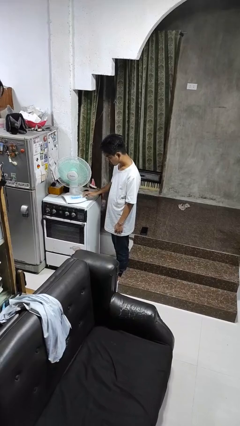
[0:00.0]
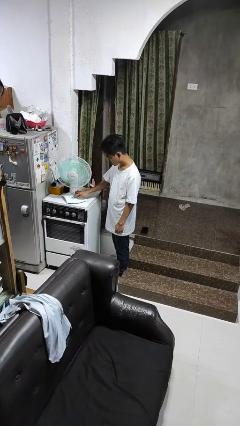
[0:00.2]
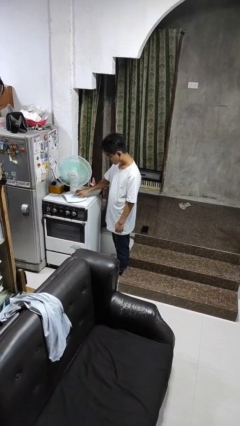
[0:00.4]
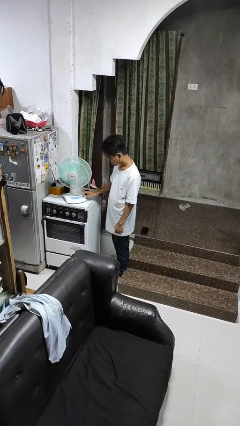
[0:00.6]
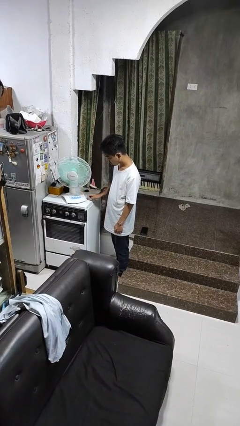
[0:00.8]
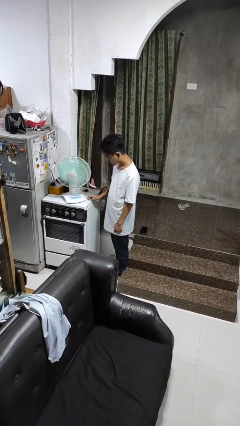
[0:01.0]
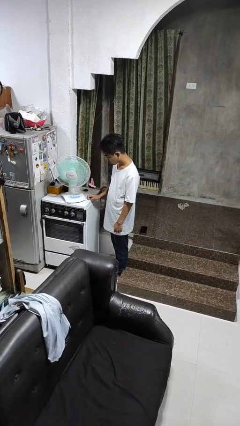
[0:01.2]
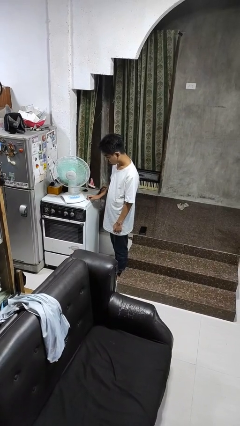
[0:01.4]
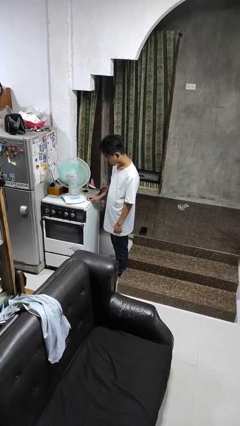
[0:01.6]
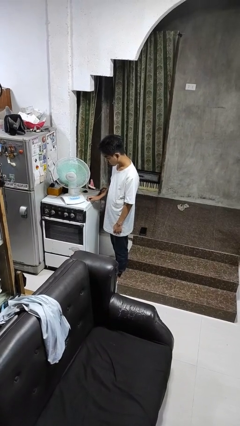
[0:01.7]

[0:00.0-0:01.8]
person turns off fan

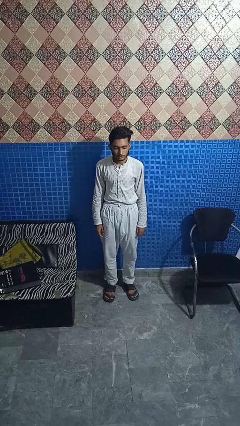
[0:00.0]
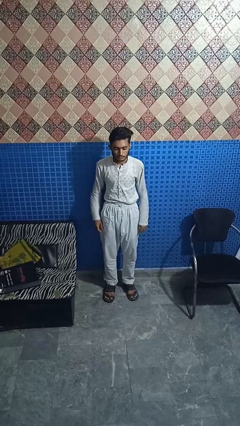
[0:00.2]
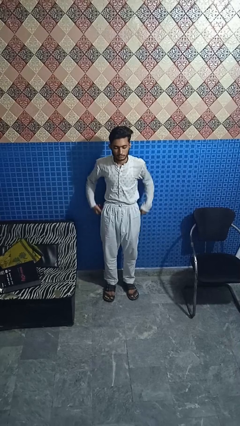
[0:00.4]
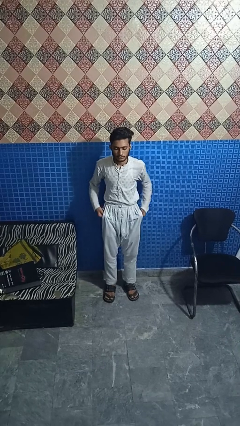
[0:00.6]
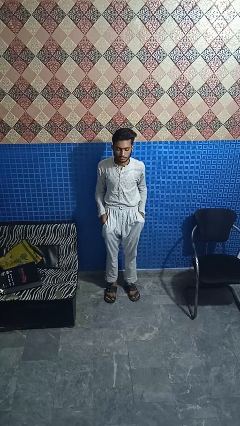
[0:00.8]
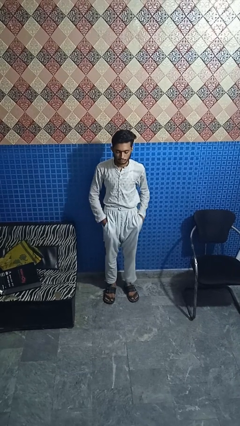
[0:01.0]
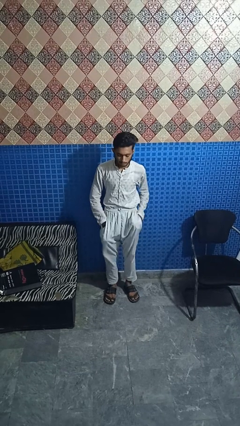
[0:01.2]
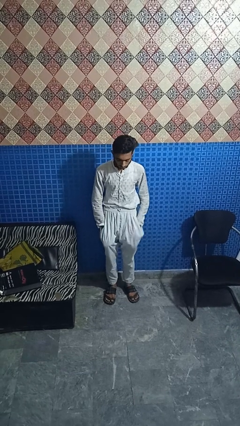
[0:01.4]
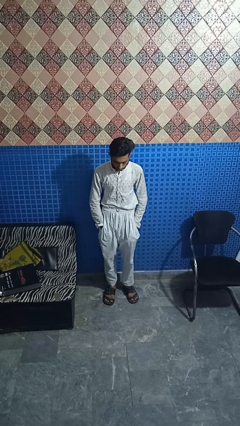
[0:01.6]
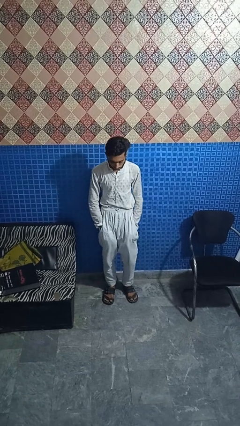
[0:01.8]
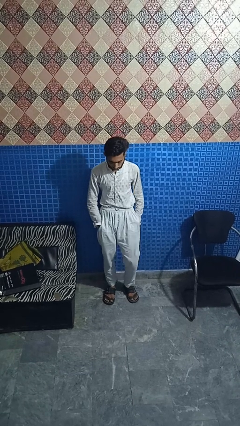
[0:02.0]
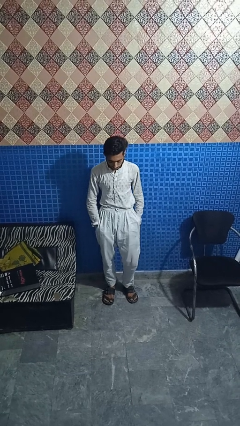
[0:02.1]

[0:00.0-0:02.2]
person puts hands in back pockets

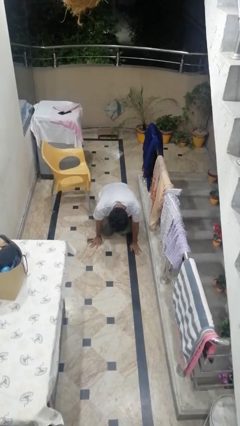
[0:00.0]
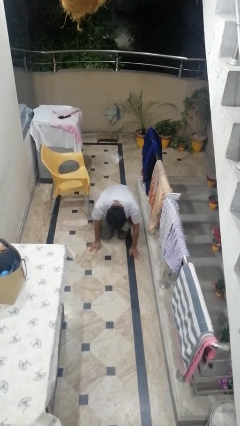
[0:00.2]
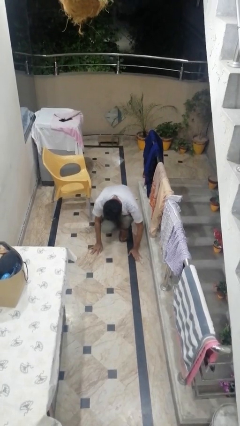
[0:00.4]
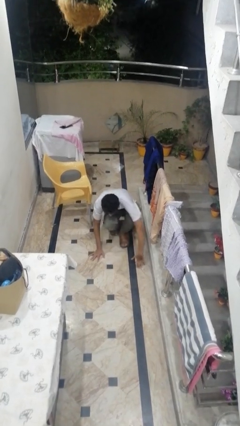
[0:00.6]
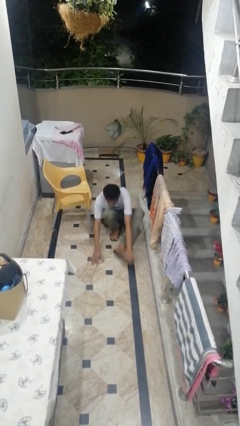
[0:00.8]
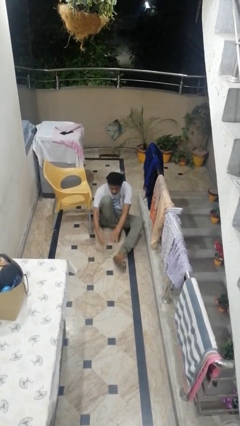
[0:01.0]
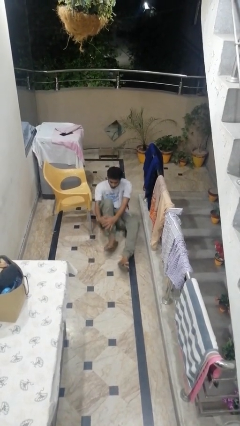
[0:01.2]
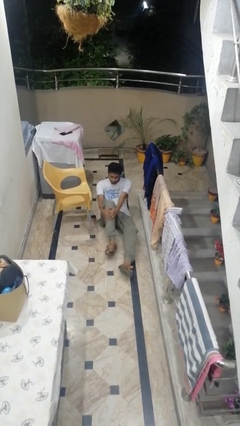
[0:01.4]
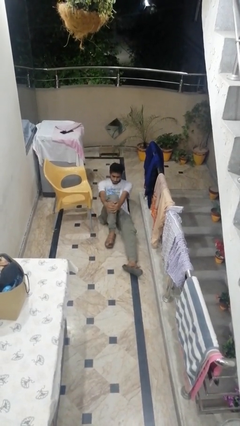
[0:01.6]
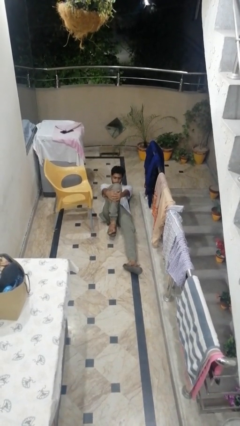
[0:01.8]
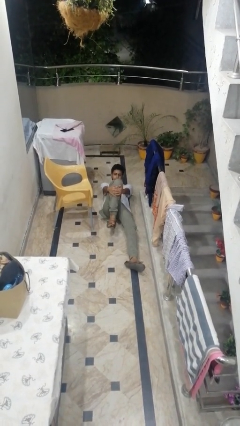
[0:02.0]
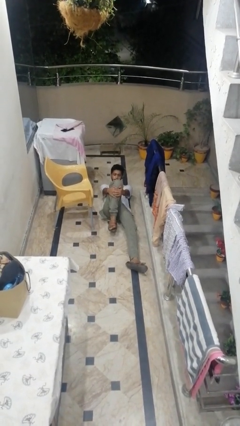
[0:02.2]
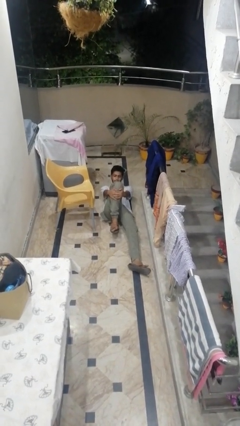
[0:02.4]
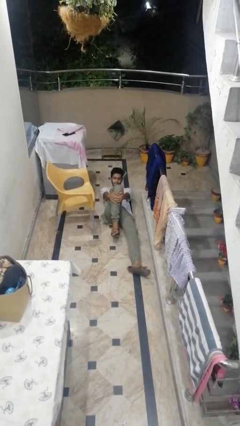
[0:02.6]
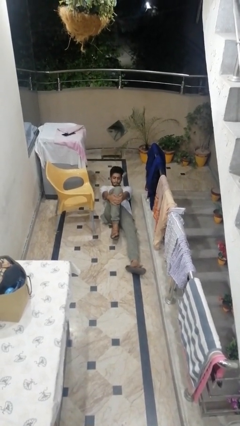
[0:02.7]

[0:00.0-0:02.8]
person lies down on floor

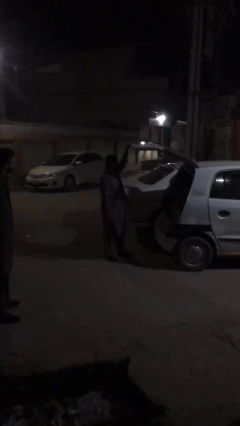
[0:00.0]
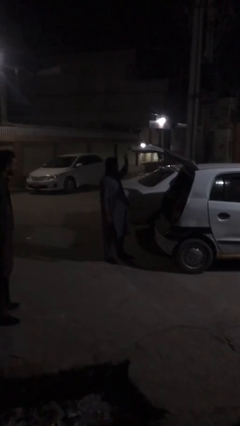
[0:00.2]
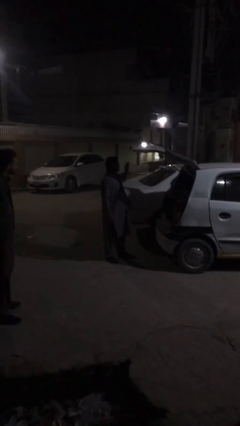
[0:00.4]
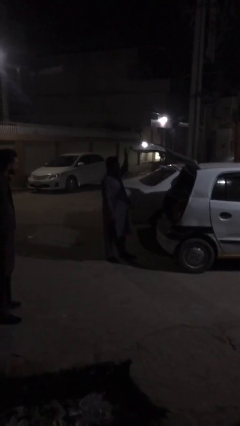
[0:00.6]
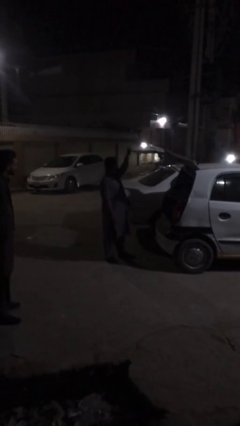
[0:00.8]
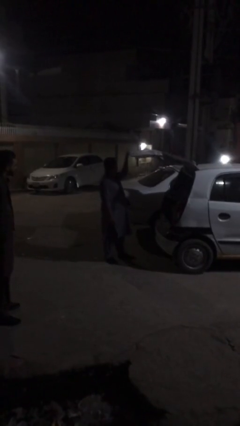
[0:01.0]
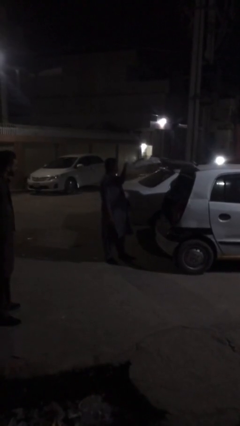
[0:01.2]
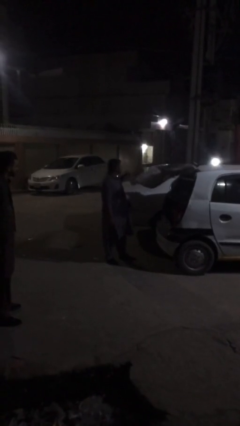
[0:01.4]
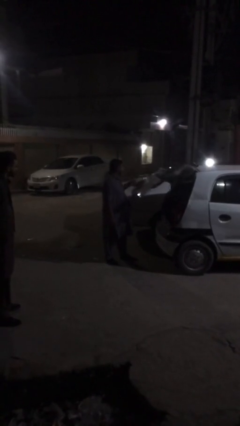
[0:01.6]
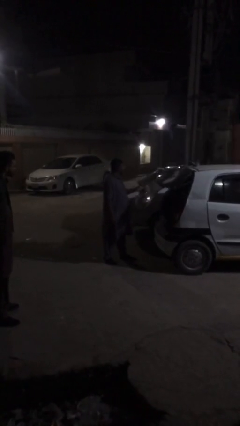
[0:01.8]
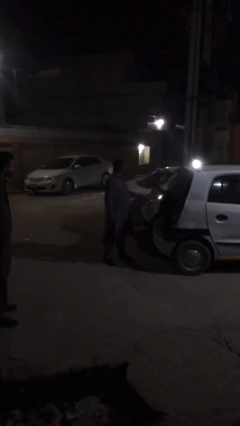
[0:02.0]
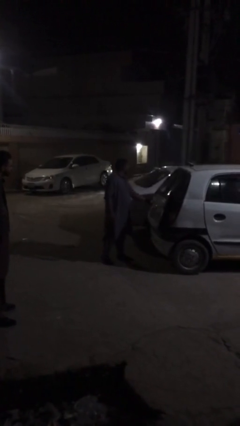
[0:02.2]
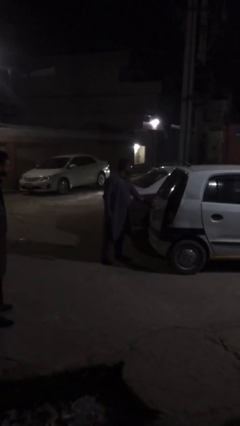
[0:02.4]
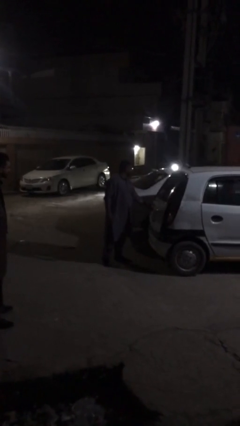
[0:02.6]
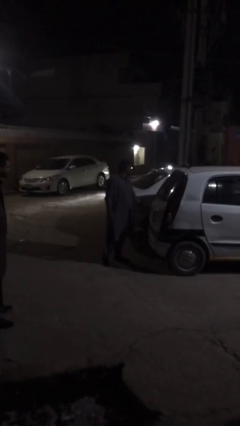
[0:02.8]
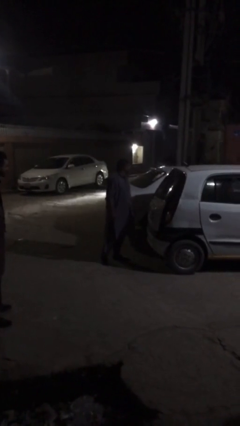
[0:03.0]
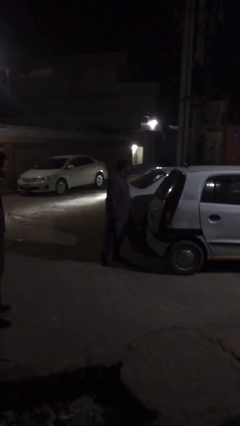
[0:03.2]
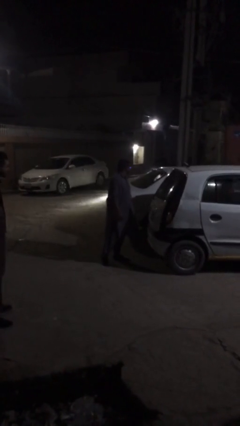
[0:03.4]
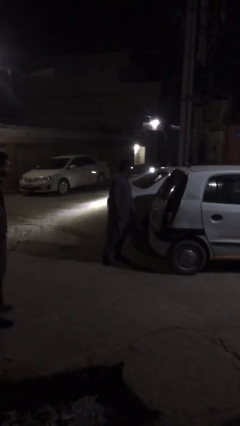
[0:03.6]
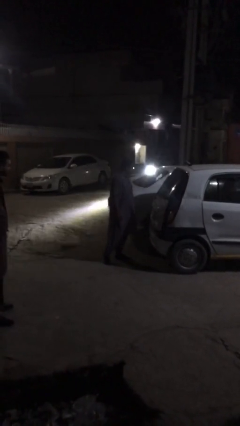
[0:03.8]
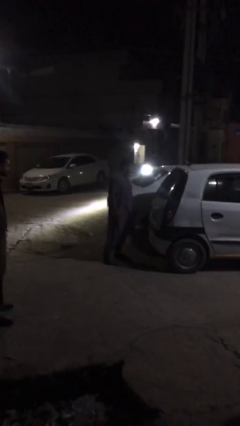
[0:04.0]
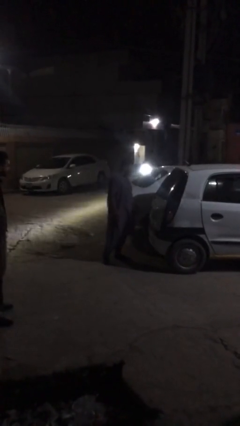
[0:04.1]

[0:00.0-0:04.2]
person closes car trunk

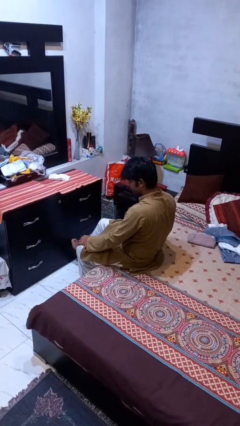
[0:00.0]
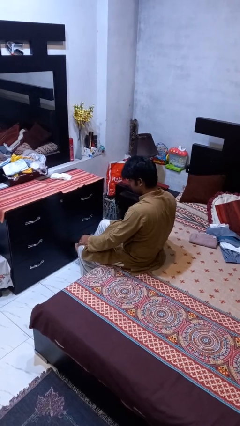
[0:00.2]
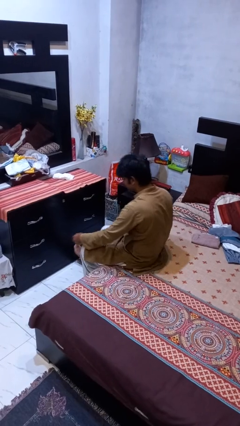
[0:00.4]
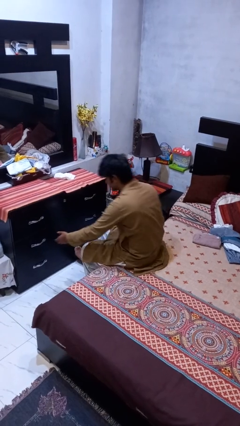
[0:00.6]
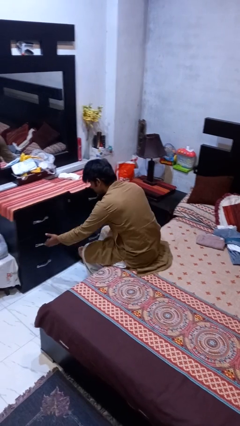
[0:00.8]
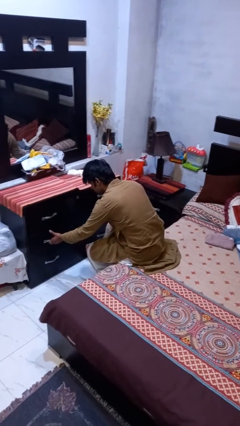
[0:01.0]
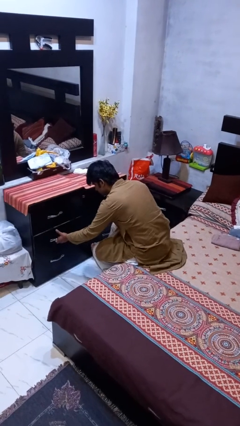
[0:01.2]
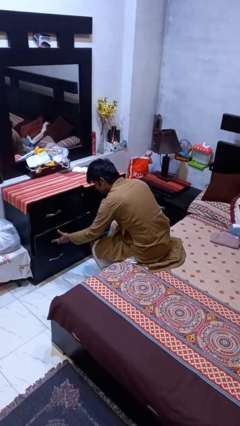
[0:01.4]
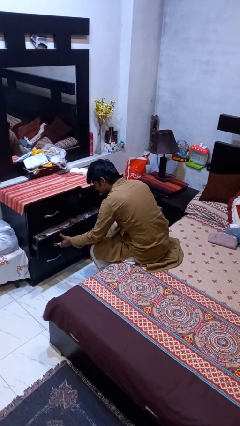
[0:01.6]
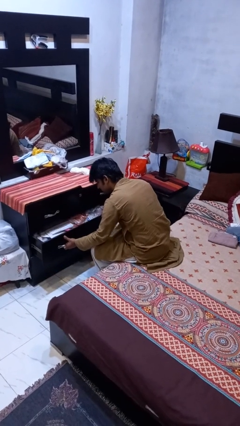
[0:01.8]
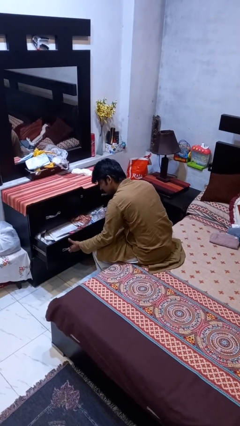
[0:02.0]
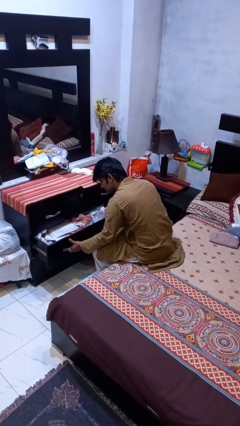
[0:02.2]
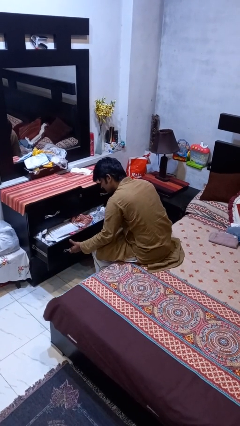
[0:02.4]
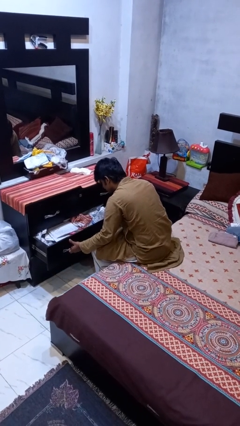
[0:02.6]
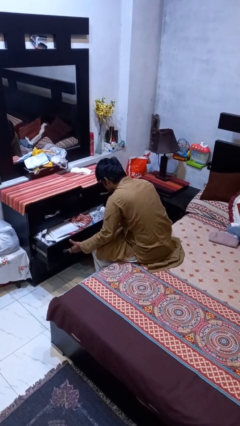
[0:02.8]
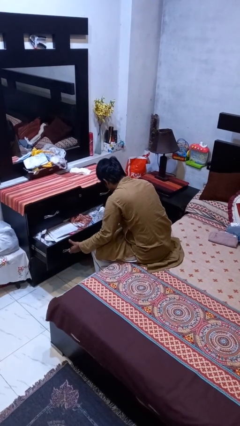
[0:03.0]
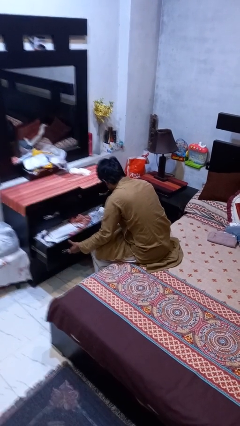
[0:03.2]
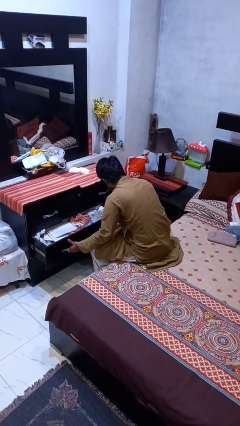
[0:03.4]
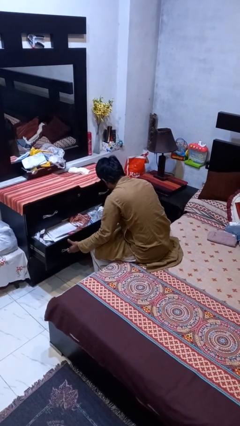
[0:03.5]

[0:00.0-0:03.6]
person opens dresser drawer

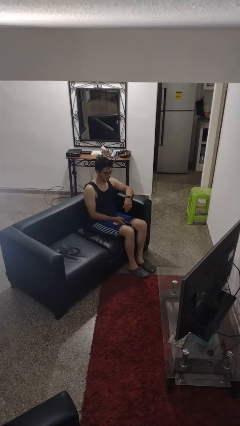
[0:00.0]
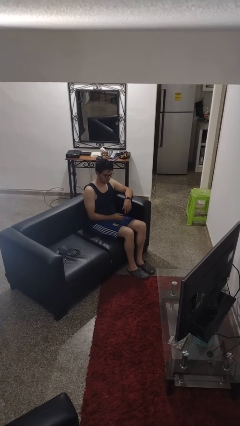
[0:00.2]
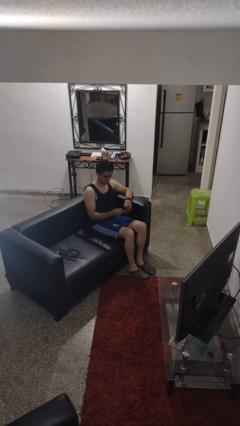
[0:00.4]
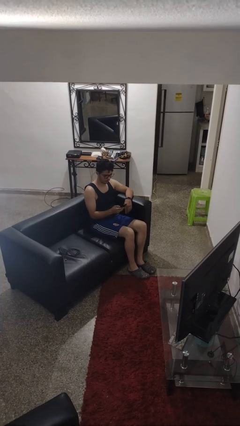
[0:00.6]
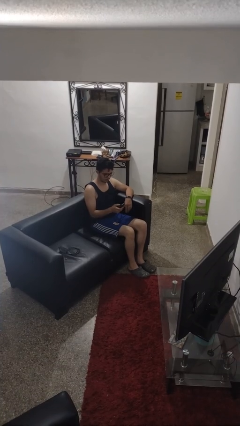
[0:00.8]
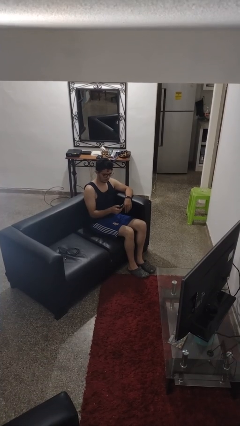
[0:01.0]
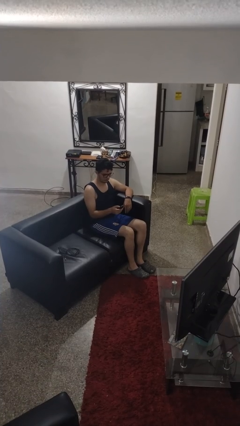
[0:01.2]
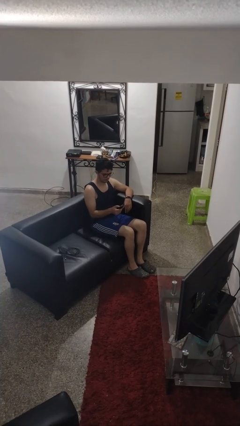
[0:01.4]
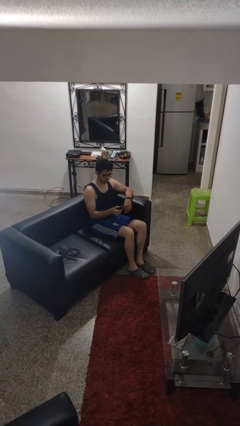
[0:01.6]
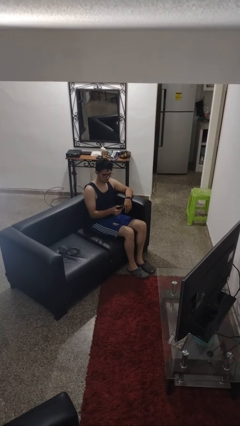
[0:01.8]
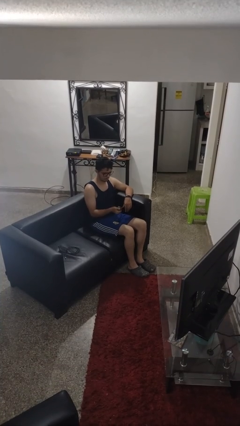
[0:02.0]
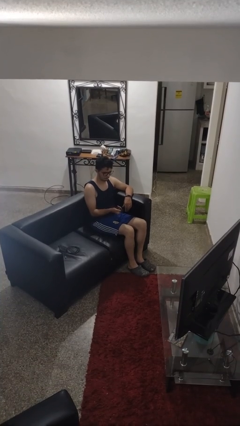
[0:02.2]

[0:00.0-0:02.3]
person uses television remote

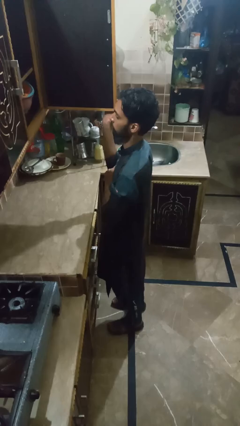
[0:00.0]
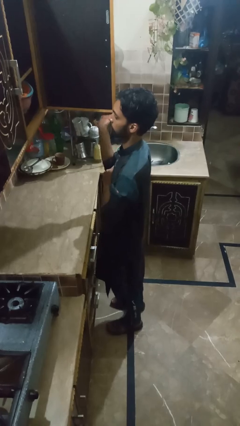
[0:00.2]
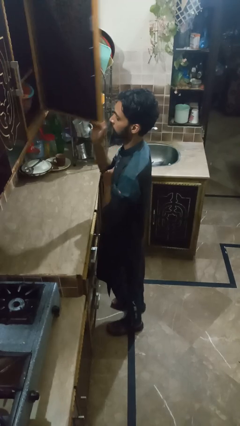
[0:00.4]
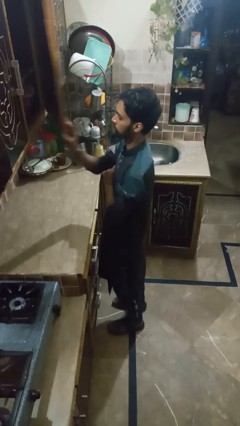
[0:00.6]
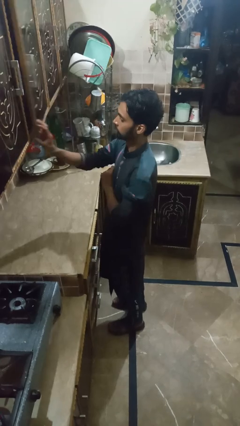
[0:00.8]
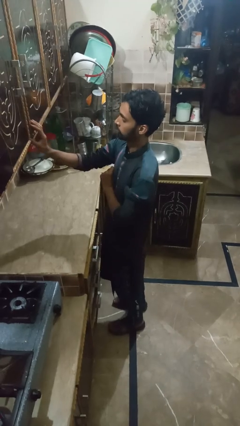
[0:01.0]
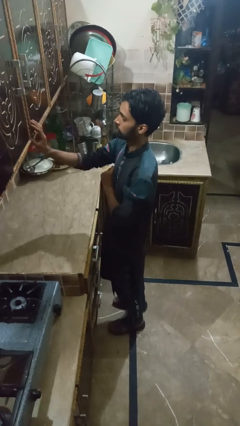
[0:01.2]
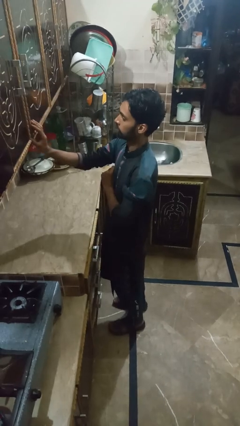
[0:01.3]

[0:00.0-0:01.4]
person closes kitchen drawer
